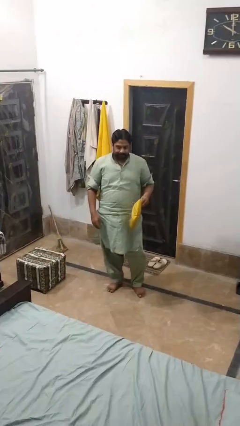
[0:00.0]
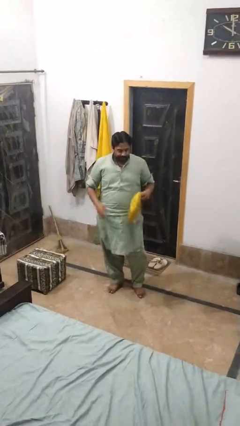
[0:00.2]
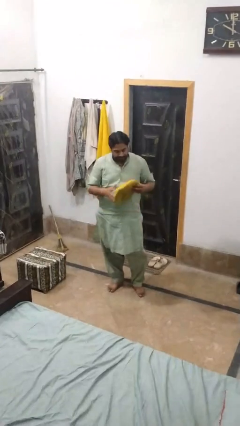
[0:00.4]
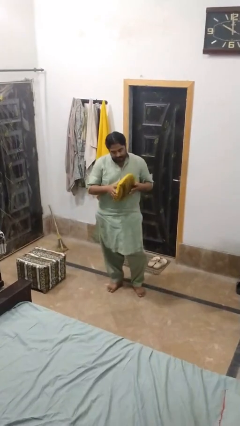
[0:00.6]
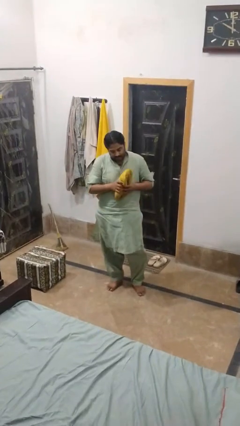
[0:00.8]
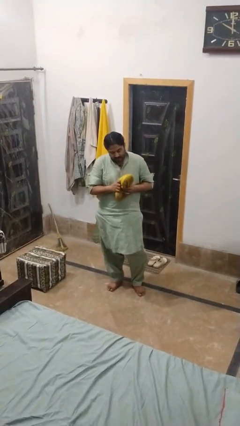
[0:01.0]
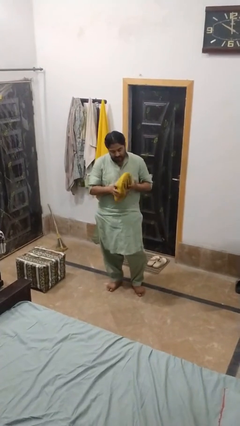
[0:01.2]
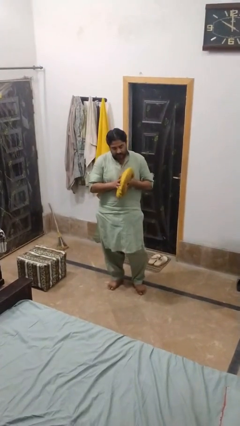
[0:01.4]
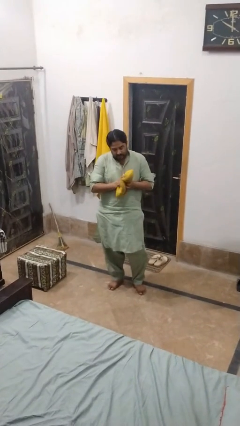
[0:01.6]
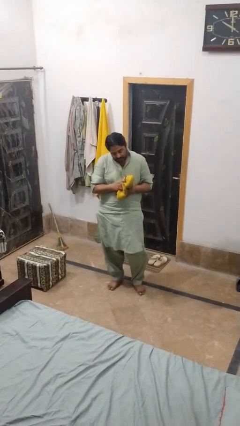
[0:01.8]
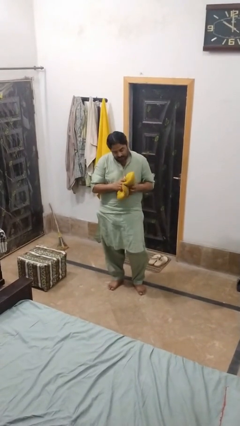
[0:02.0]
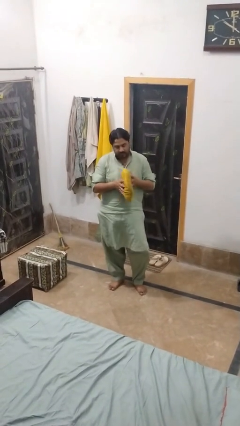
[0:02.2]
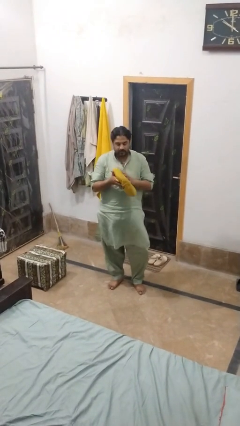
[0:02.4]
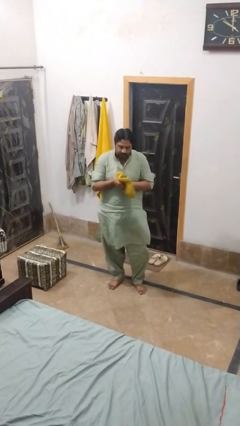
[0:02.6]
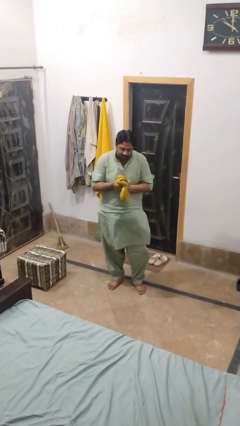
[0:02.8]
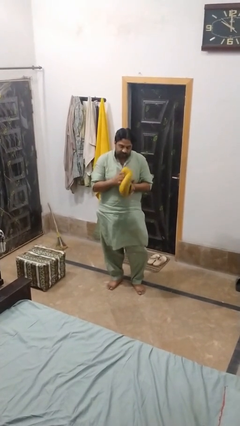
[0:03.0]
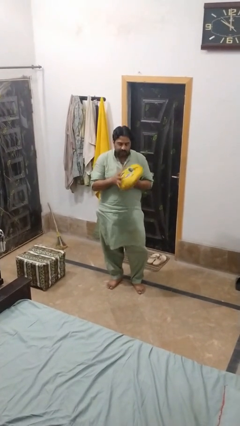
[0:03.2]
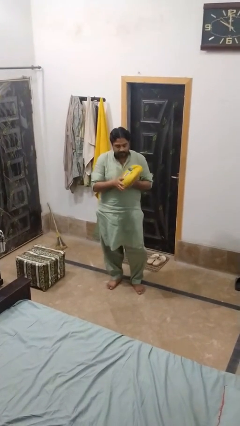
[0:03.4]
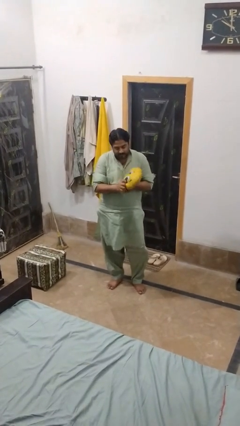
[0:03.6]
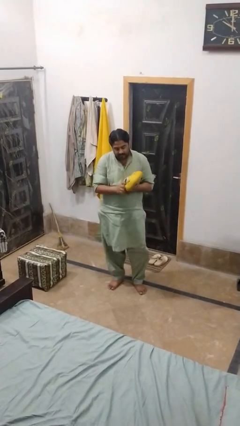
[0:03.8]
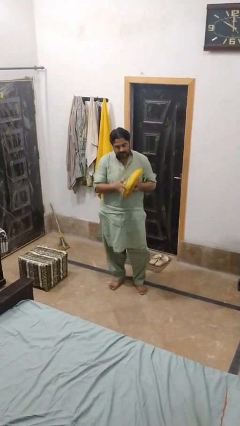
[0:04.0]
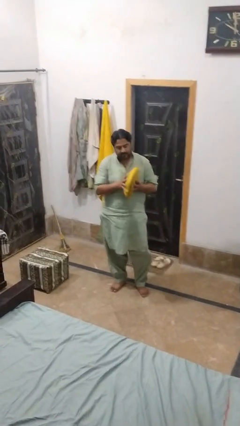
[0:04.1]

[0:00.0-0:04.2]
person squeezes object

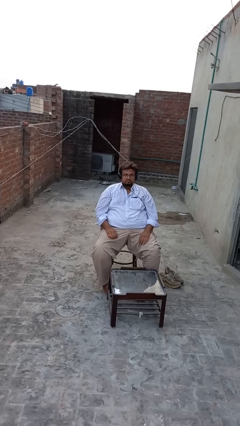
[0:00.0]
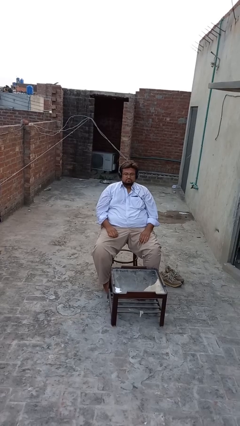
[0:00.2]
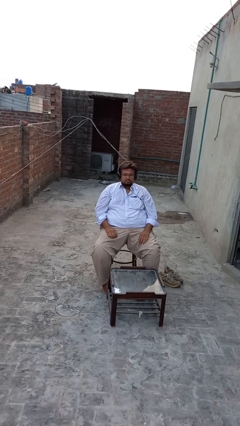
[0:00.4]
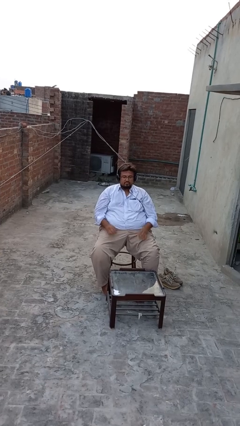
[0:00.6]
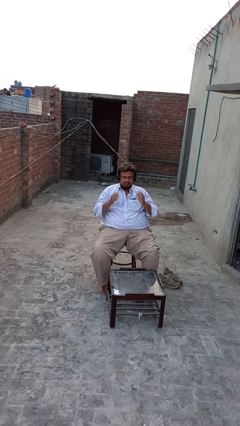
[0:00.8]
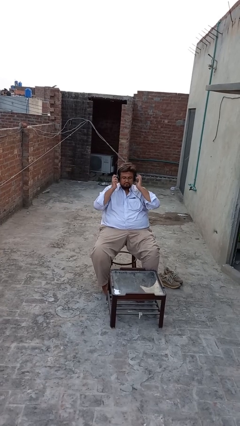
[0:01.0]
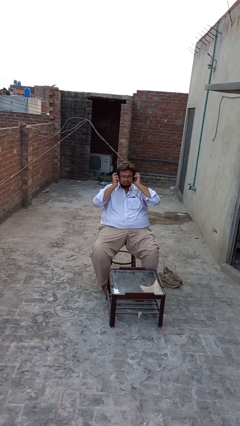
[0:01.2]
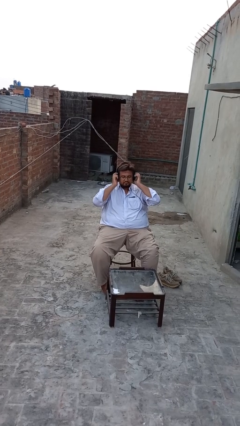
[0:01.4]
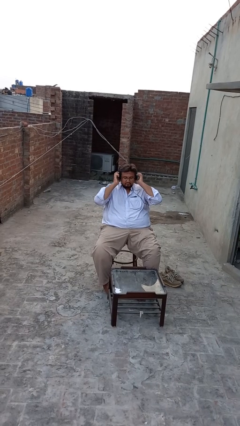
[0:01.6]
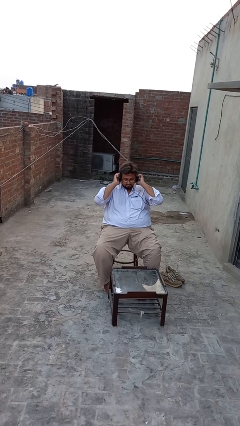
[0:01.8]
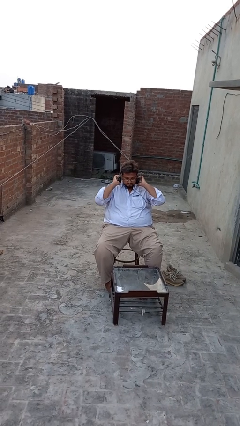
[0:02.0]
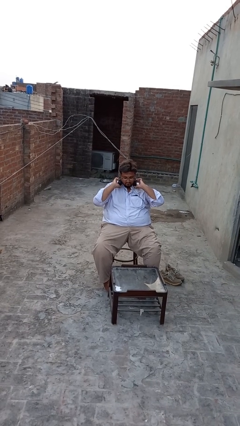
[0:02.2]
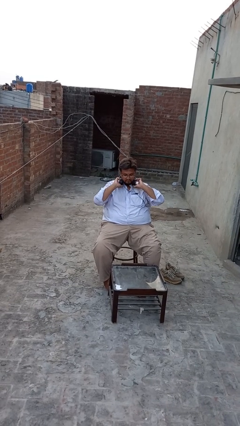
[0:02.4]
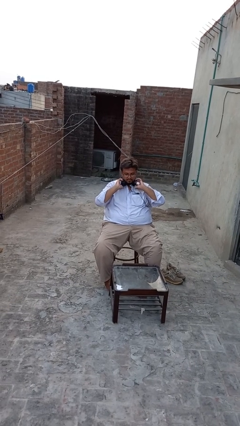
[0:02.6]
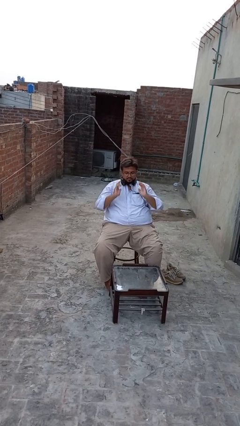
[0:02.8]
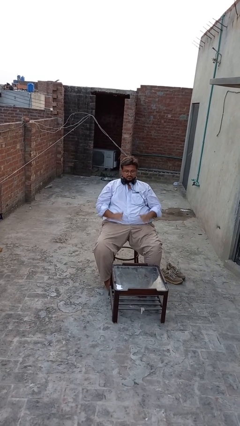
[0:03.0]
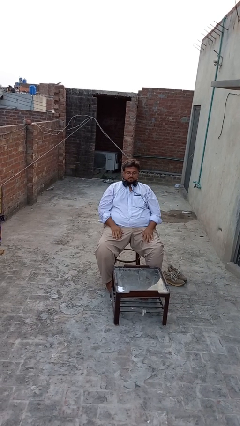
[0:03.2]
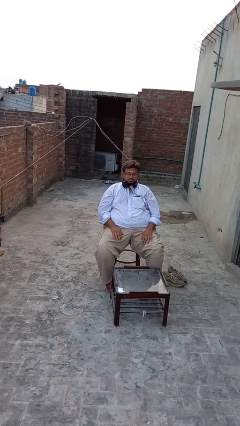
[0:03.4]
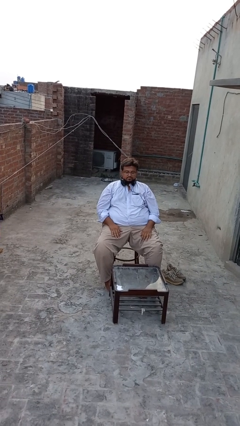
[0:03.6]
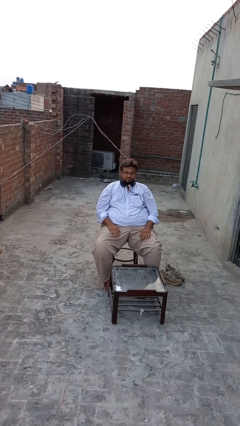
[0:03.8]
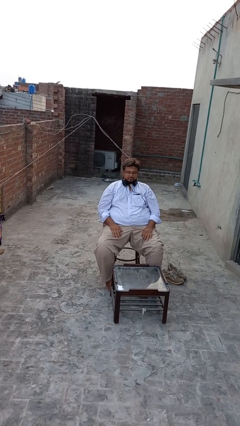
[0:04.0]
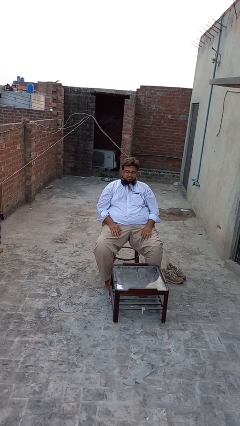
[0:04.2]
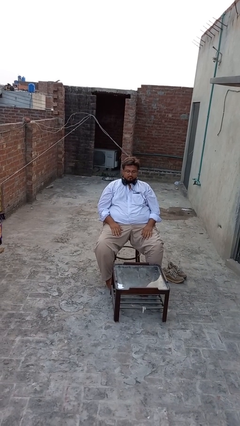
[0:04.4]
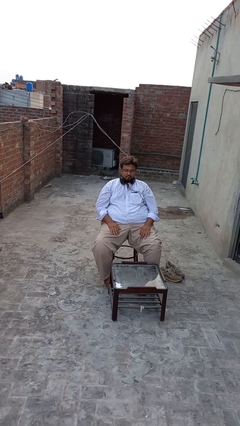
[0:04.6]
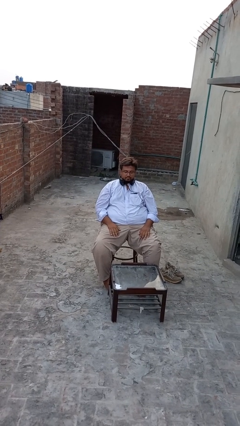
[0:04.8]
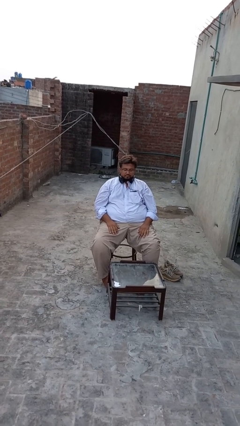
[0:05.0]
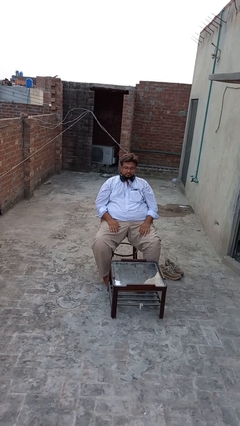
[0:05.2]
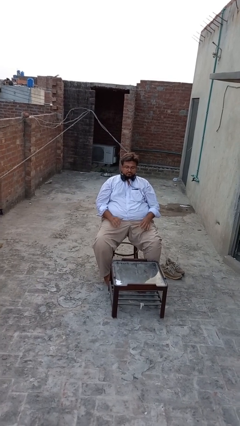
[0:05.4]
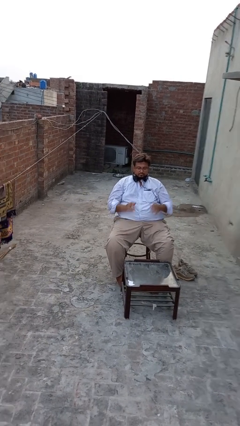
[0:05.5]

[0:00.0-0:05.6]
person takes off headphones

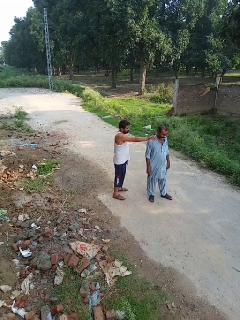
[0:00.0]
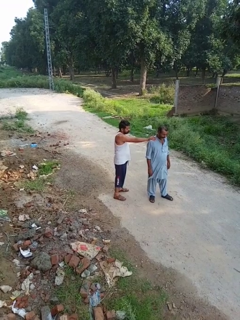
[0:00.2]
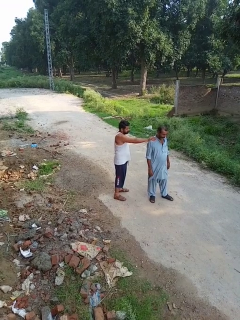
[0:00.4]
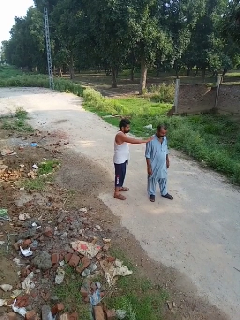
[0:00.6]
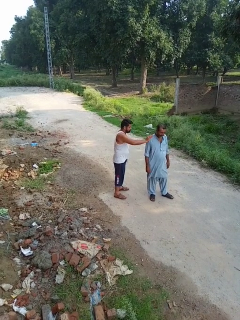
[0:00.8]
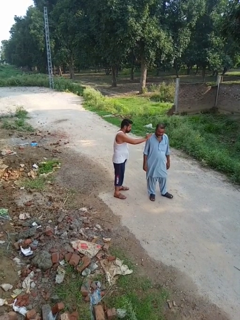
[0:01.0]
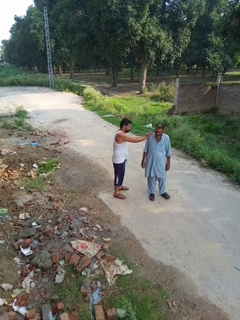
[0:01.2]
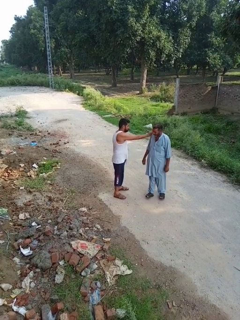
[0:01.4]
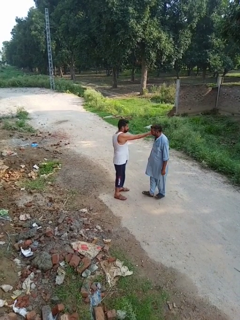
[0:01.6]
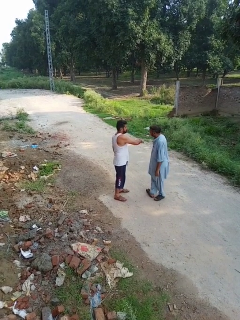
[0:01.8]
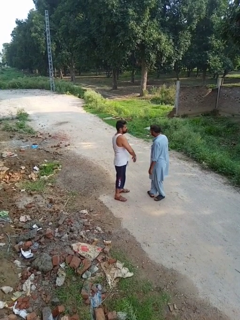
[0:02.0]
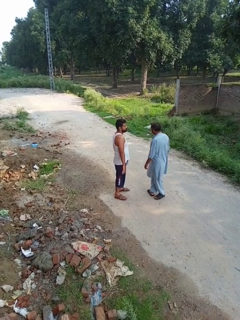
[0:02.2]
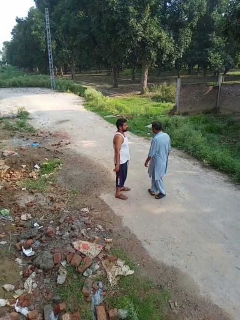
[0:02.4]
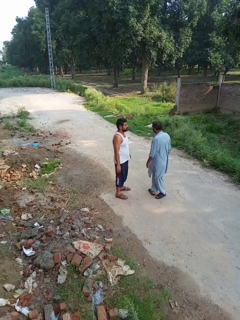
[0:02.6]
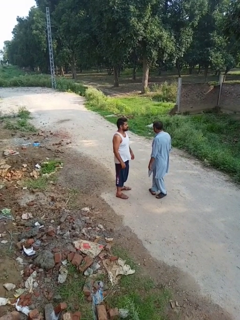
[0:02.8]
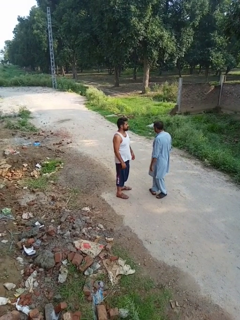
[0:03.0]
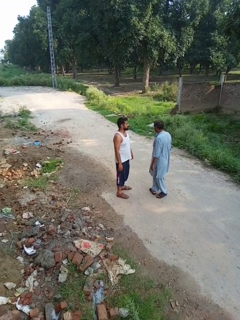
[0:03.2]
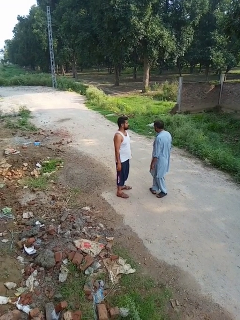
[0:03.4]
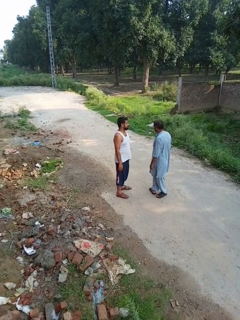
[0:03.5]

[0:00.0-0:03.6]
person spins person around

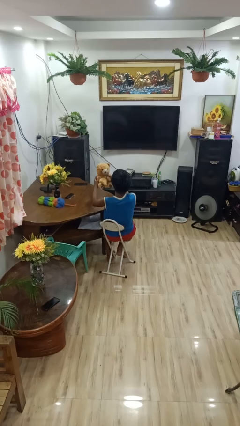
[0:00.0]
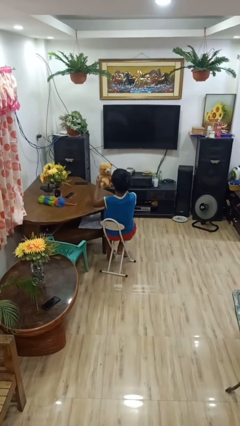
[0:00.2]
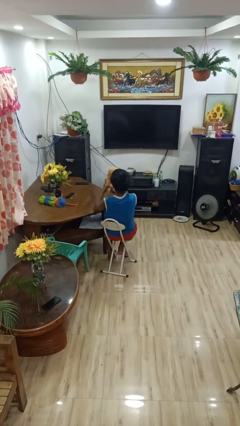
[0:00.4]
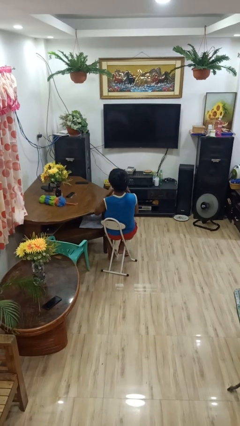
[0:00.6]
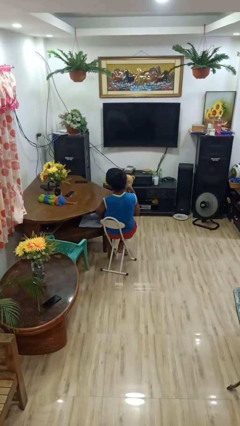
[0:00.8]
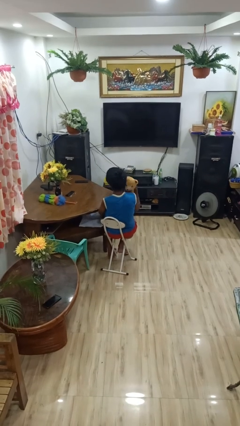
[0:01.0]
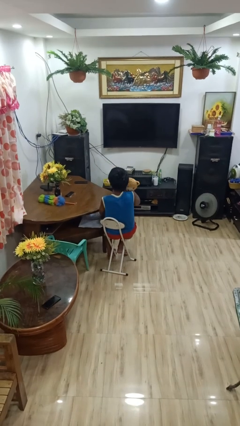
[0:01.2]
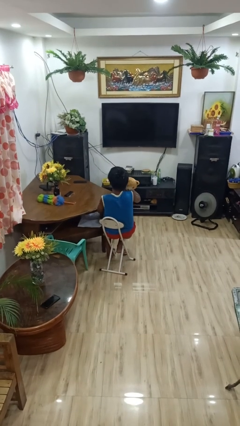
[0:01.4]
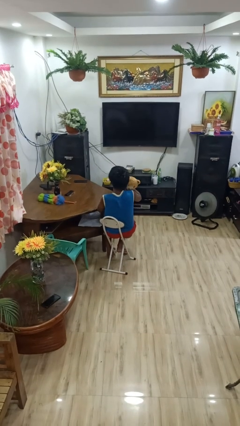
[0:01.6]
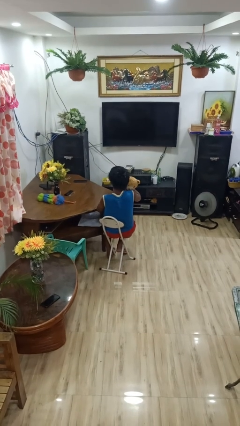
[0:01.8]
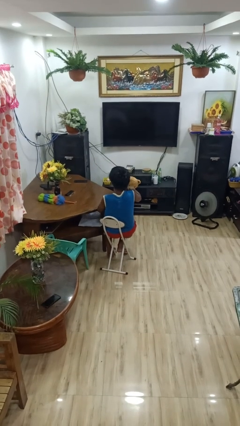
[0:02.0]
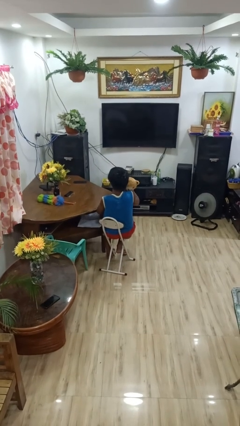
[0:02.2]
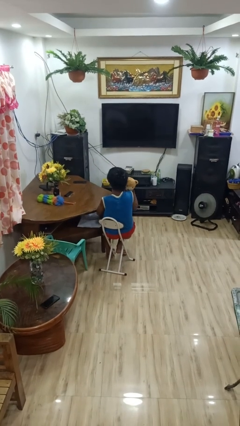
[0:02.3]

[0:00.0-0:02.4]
person hugs stuffed animal

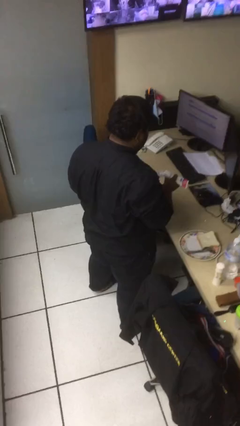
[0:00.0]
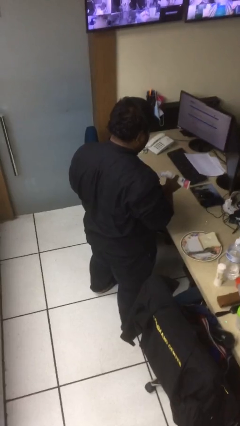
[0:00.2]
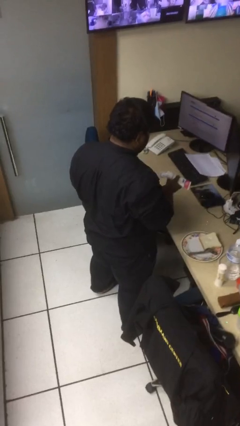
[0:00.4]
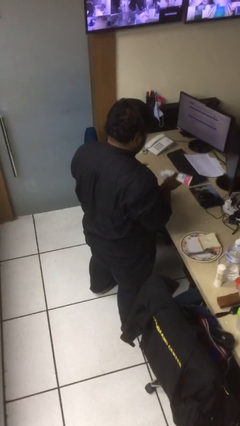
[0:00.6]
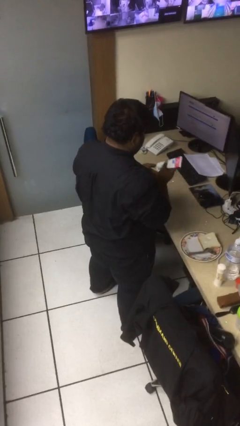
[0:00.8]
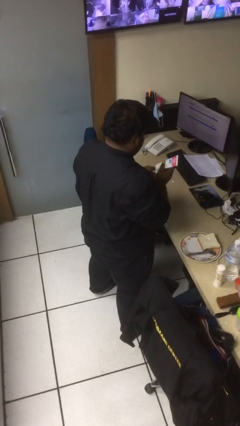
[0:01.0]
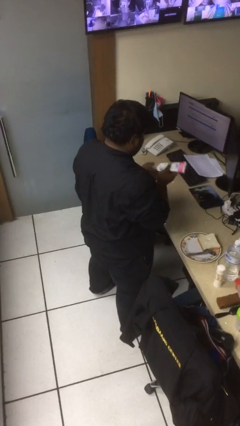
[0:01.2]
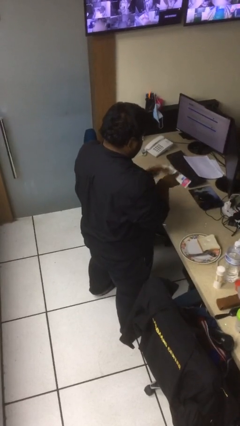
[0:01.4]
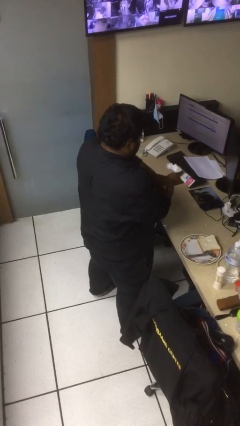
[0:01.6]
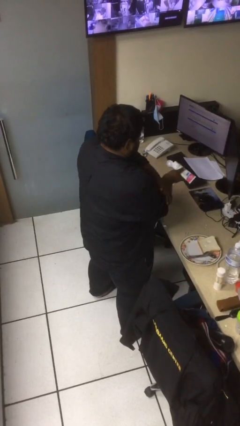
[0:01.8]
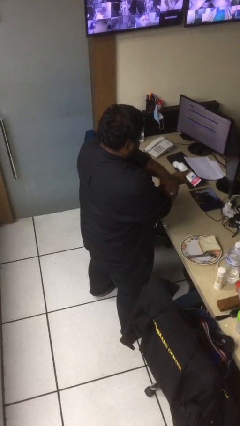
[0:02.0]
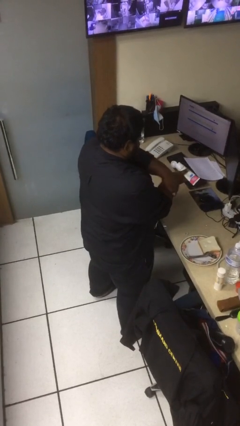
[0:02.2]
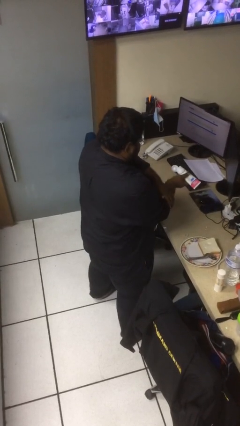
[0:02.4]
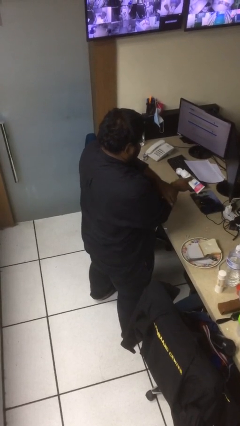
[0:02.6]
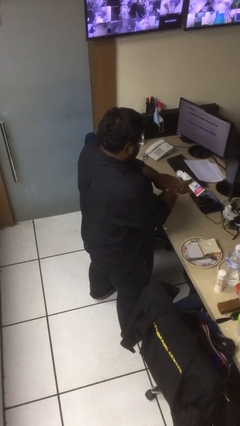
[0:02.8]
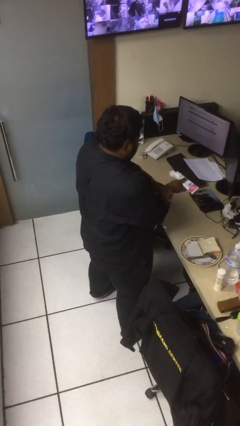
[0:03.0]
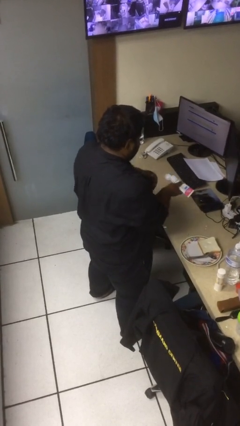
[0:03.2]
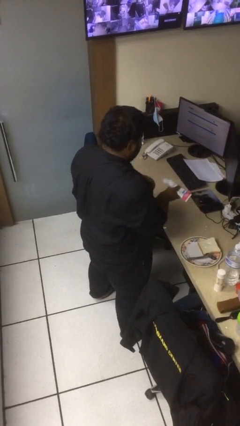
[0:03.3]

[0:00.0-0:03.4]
person applies sunscreen
